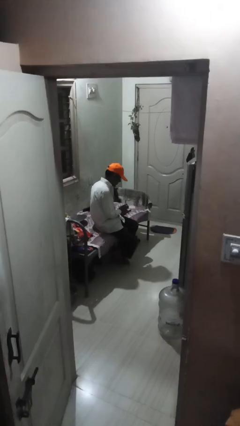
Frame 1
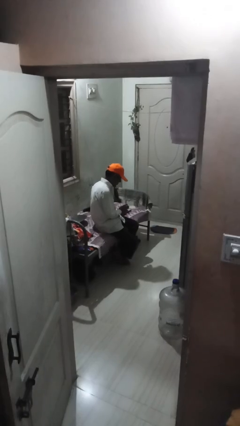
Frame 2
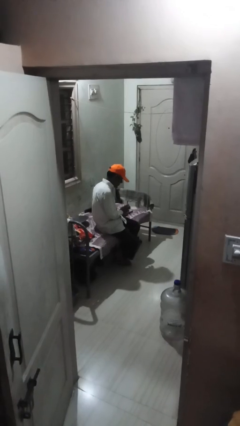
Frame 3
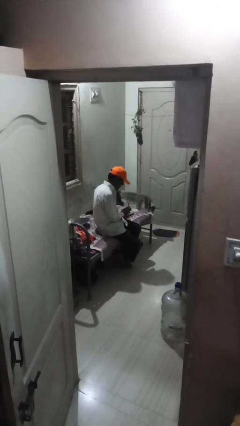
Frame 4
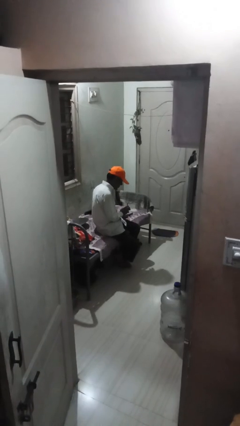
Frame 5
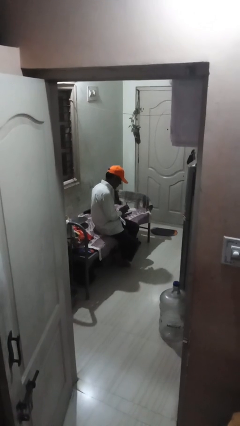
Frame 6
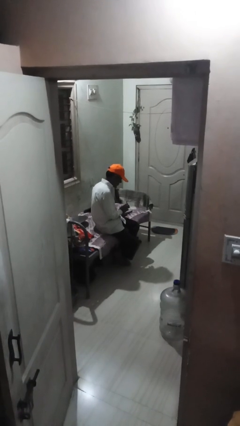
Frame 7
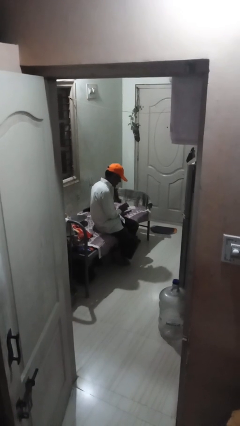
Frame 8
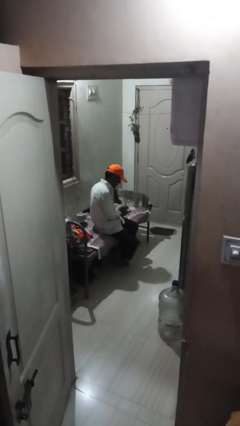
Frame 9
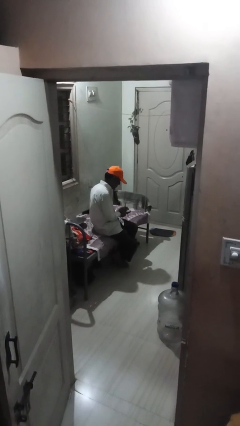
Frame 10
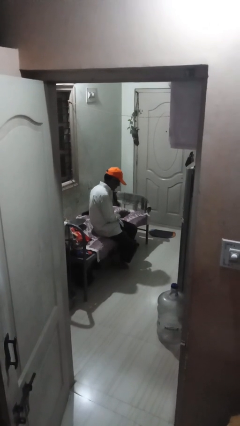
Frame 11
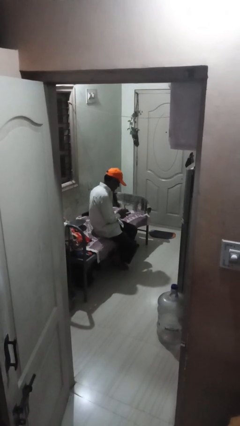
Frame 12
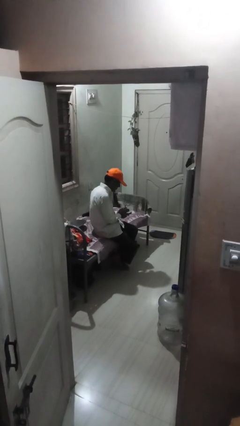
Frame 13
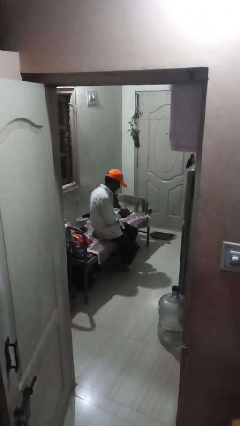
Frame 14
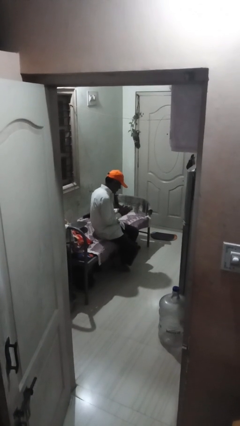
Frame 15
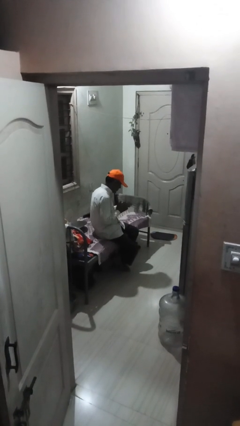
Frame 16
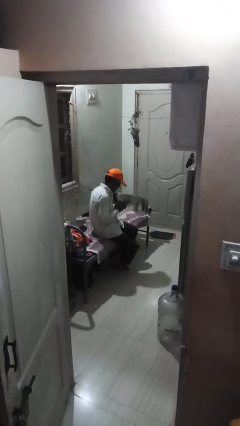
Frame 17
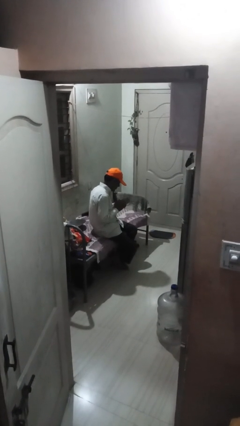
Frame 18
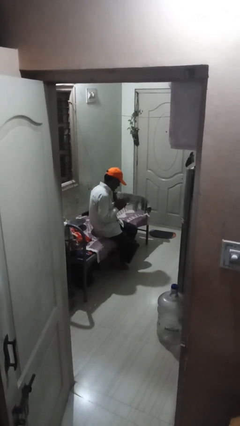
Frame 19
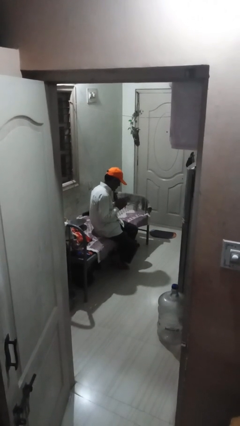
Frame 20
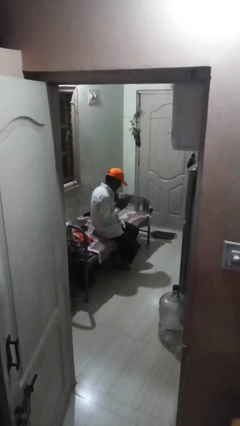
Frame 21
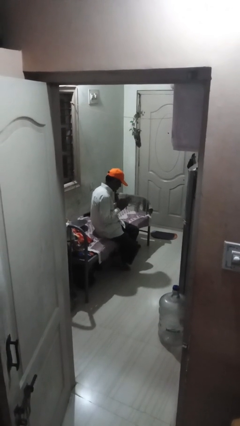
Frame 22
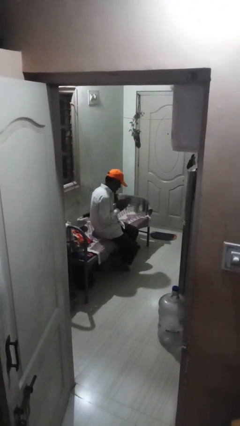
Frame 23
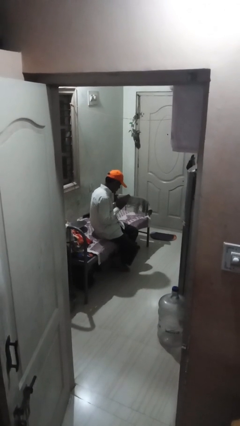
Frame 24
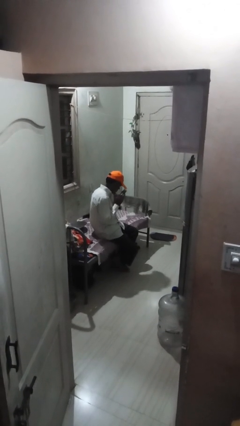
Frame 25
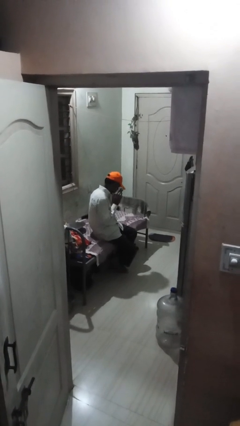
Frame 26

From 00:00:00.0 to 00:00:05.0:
person taps object with finger

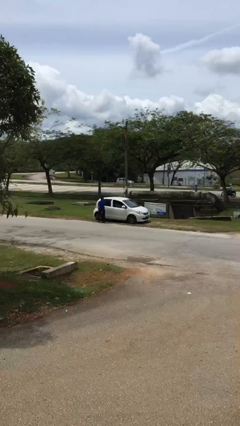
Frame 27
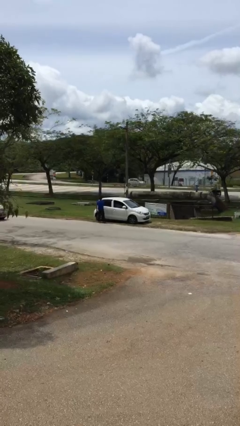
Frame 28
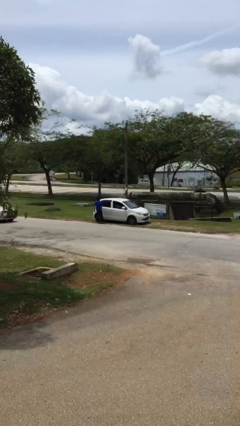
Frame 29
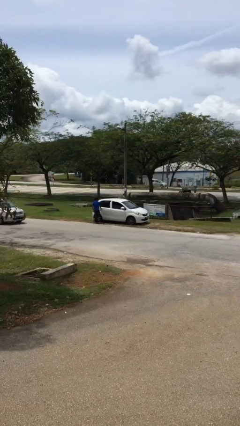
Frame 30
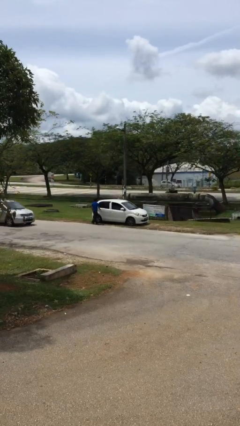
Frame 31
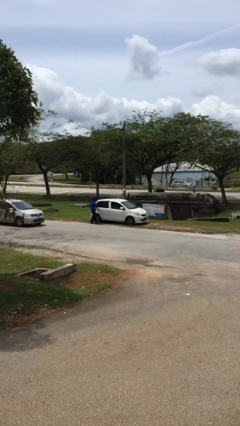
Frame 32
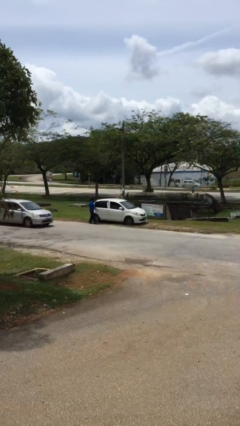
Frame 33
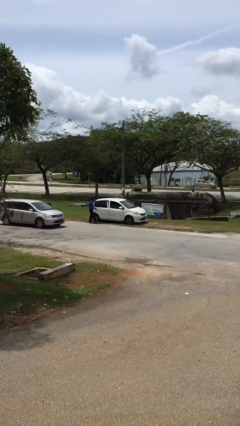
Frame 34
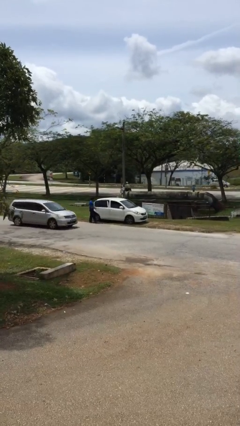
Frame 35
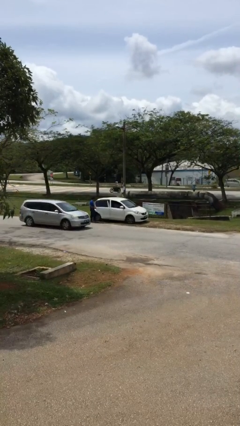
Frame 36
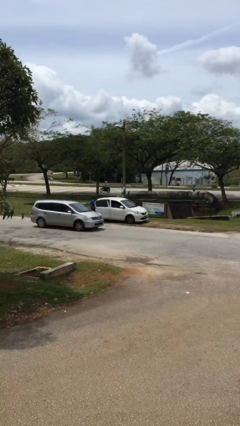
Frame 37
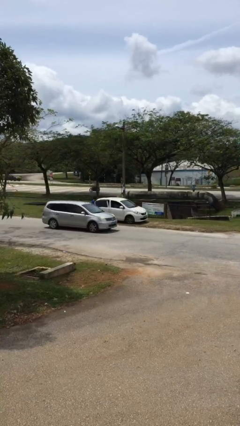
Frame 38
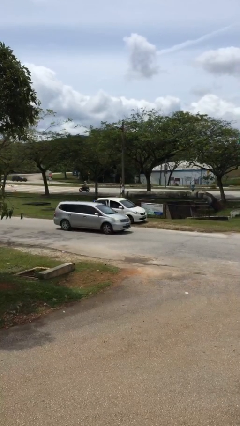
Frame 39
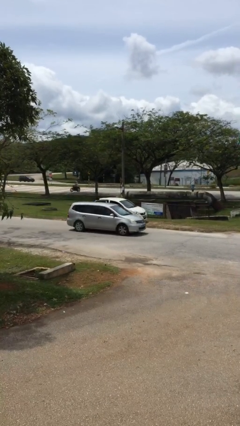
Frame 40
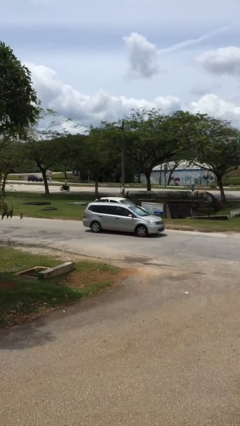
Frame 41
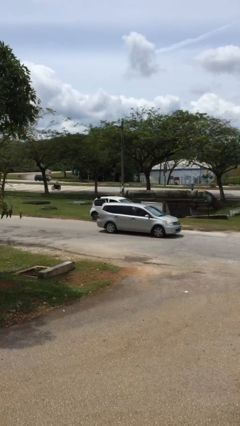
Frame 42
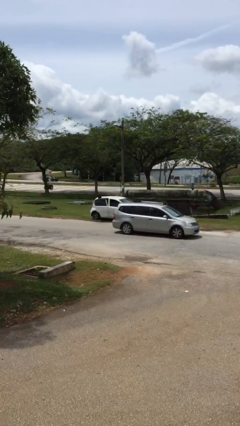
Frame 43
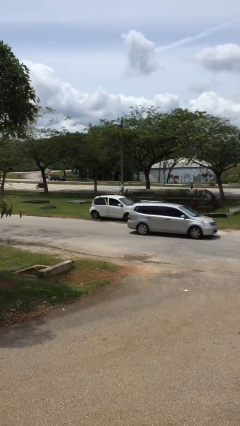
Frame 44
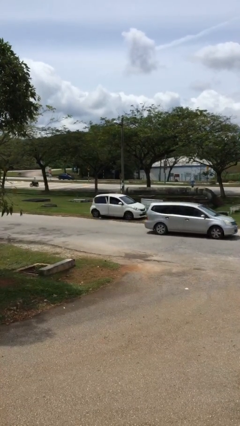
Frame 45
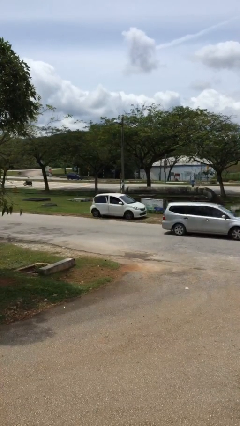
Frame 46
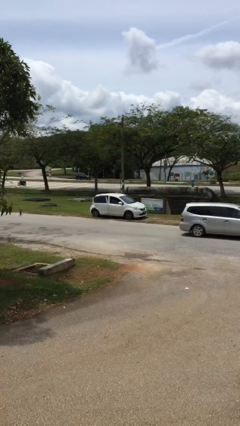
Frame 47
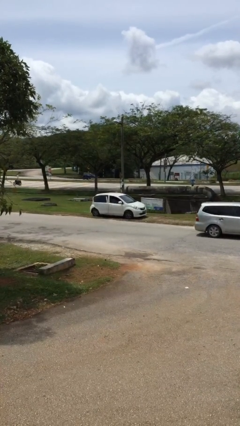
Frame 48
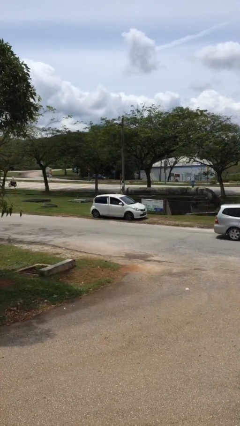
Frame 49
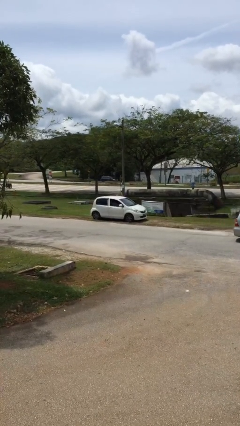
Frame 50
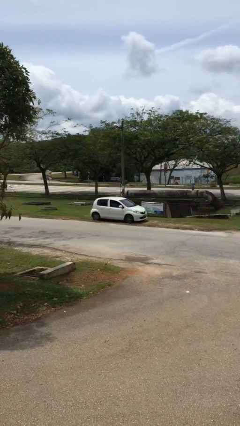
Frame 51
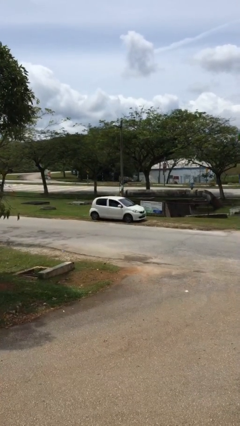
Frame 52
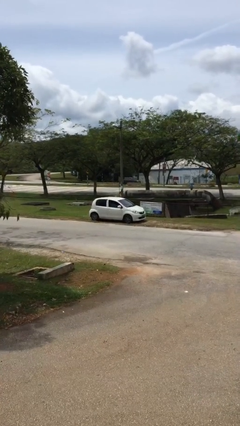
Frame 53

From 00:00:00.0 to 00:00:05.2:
car picks up person

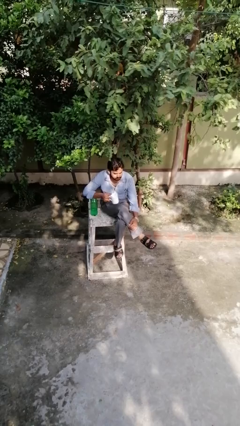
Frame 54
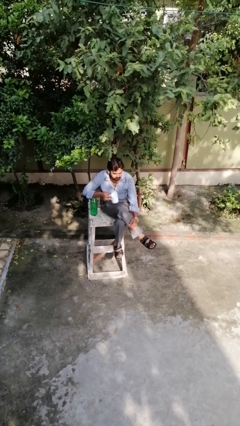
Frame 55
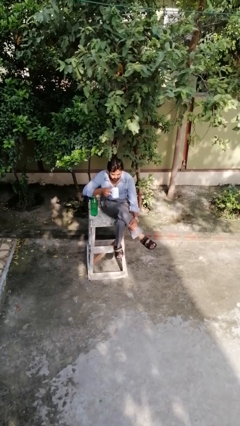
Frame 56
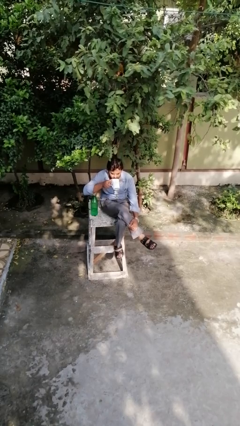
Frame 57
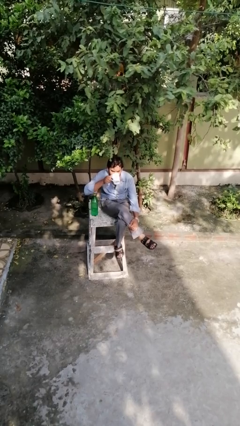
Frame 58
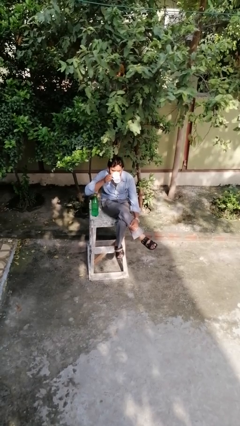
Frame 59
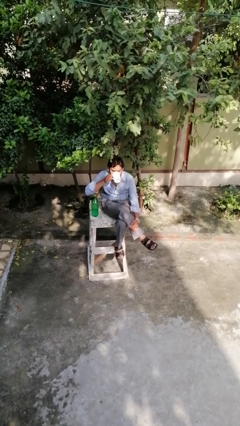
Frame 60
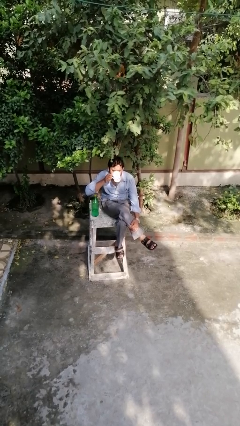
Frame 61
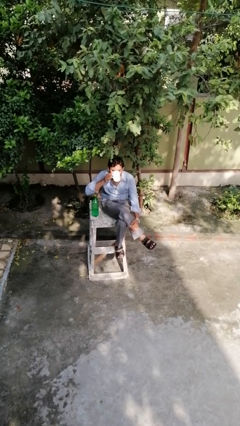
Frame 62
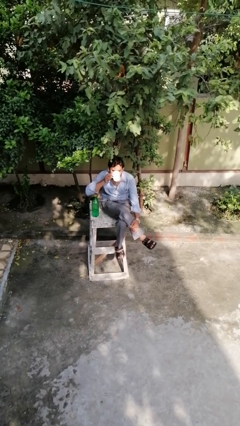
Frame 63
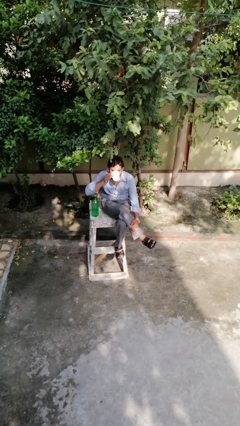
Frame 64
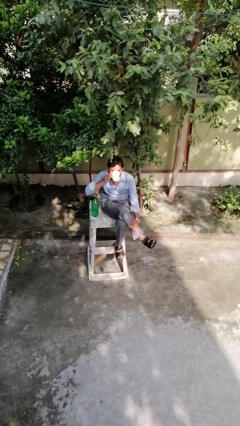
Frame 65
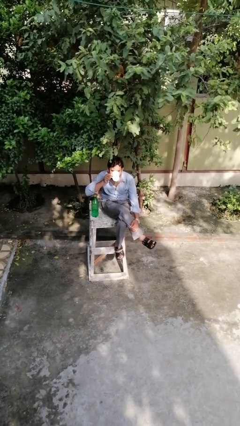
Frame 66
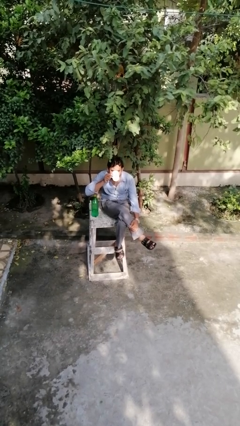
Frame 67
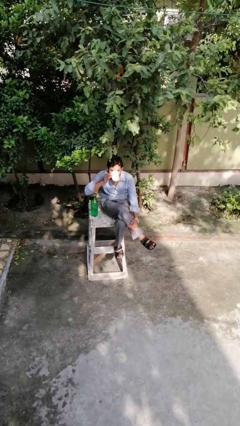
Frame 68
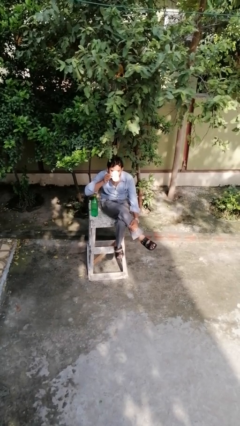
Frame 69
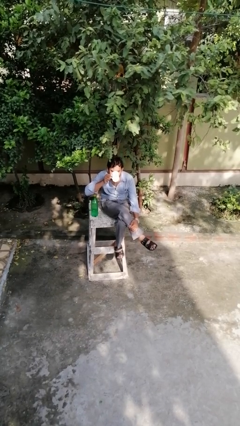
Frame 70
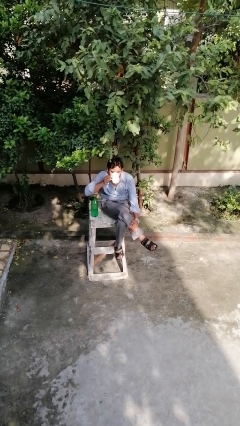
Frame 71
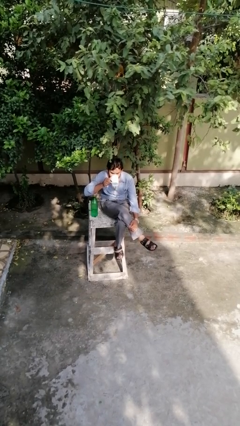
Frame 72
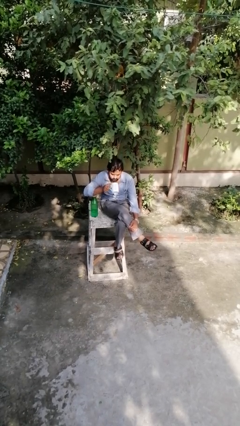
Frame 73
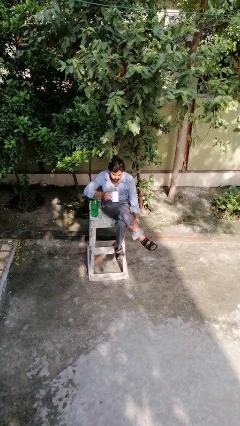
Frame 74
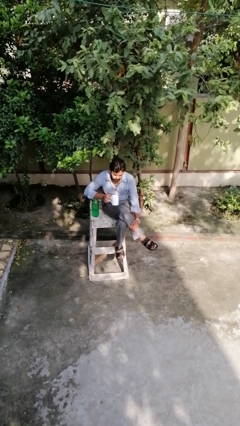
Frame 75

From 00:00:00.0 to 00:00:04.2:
person drinks from mug

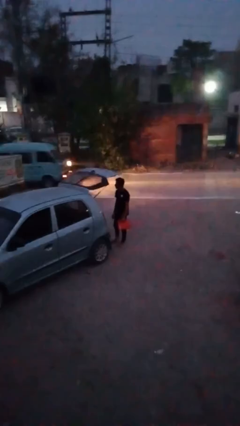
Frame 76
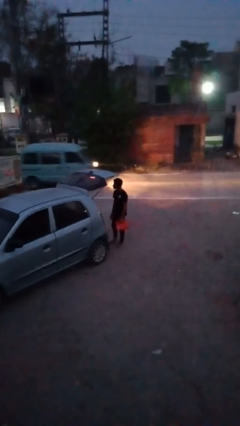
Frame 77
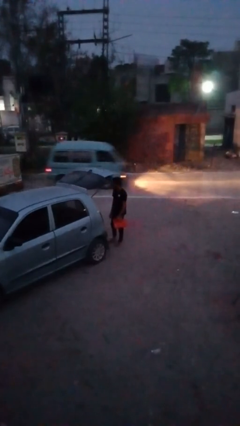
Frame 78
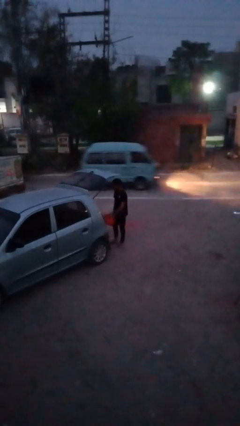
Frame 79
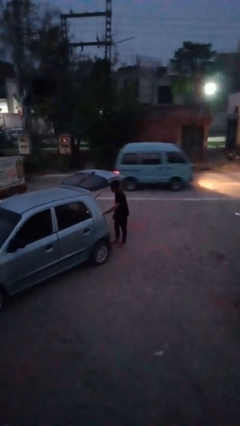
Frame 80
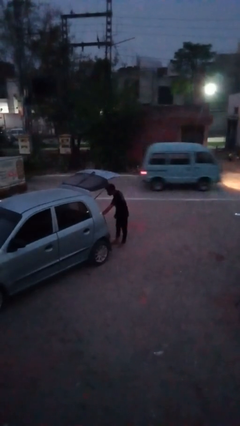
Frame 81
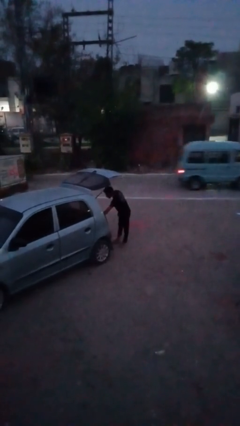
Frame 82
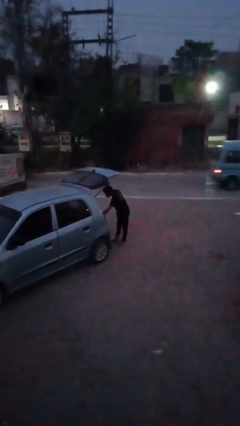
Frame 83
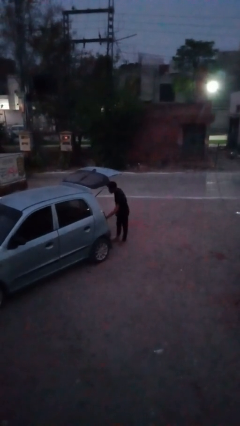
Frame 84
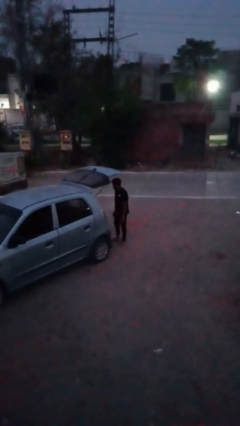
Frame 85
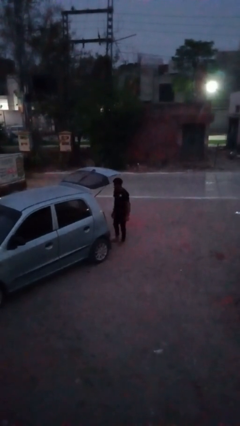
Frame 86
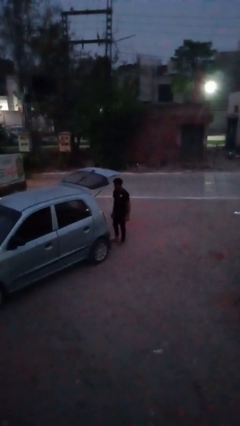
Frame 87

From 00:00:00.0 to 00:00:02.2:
person loads car

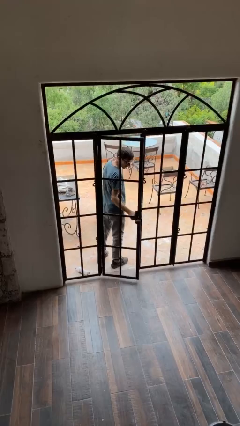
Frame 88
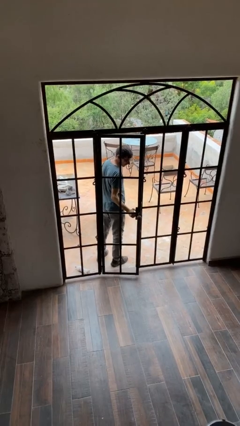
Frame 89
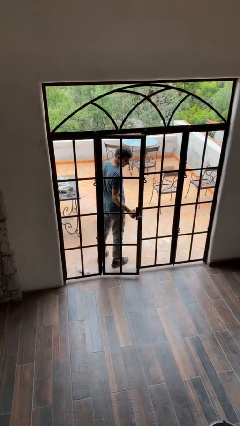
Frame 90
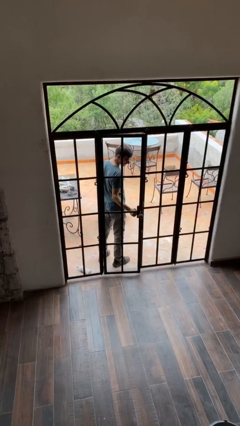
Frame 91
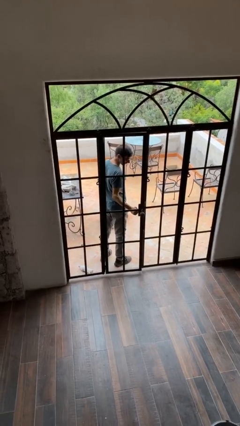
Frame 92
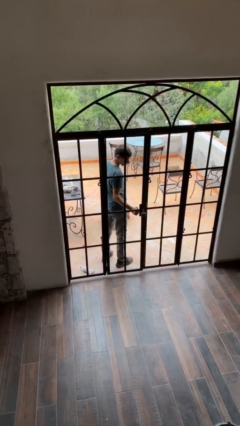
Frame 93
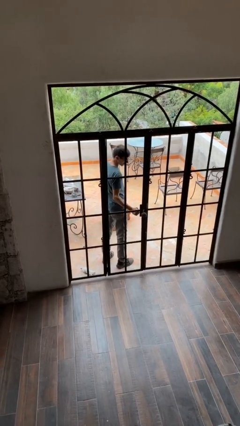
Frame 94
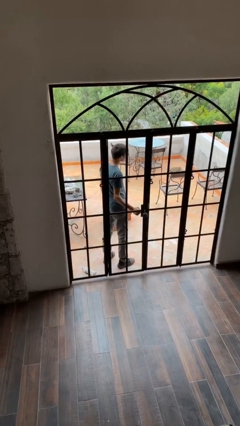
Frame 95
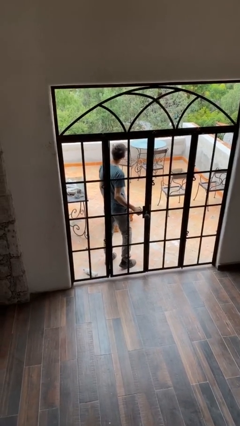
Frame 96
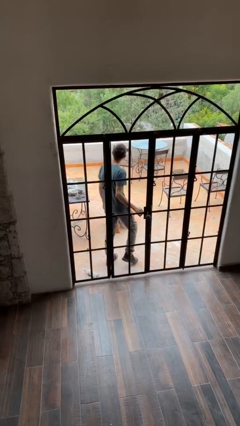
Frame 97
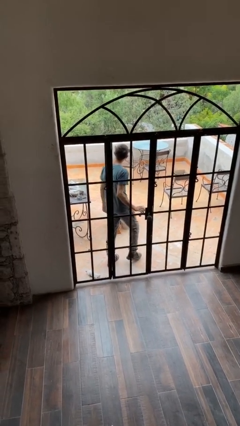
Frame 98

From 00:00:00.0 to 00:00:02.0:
person closes facility door
